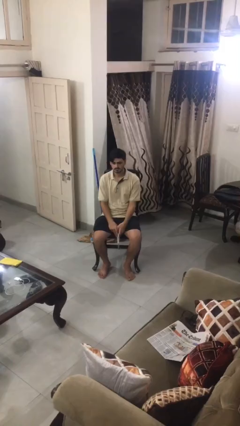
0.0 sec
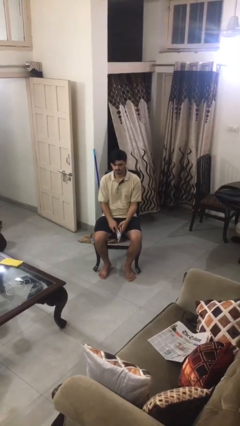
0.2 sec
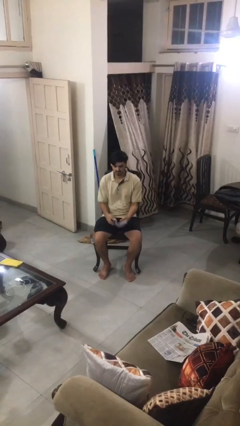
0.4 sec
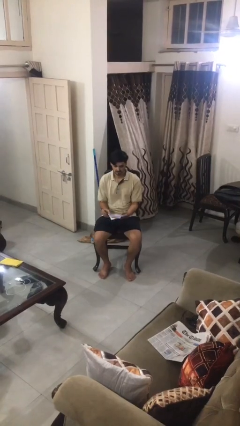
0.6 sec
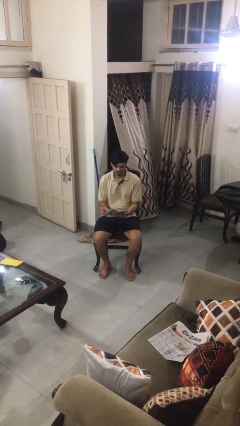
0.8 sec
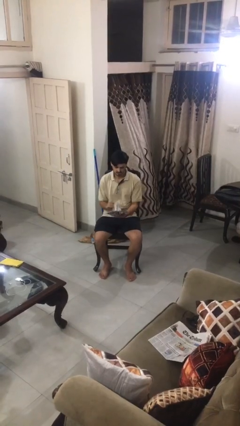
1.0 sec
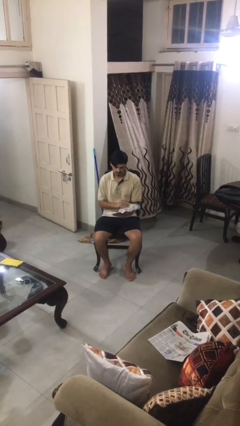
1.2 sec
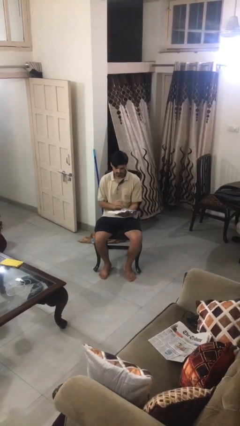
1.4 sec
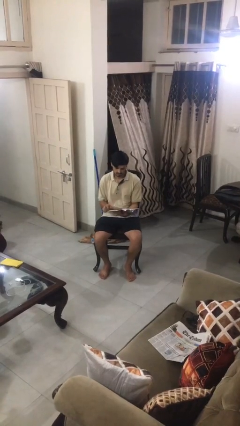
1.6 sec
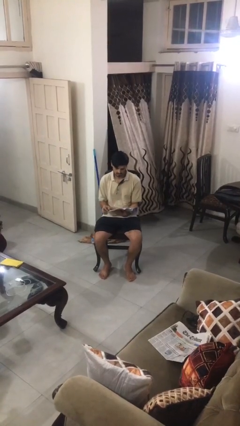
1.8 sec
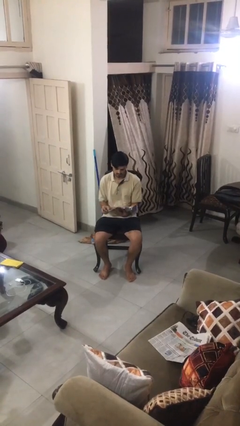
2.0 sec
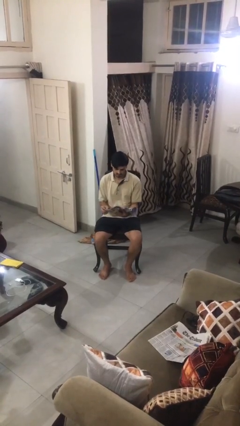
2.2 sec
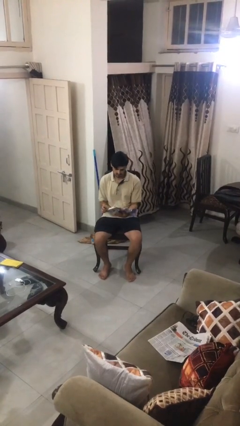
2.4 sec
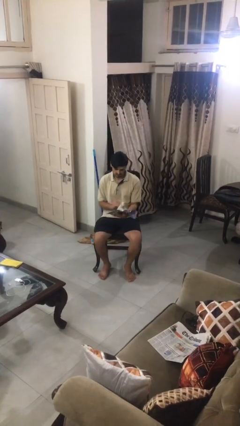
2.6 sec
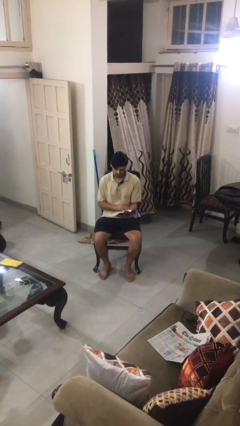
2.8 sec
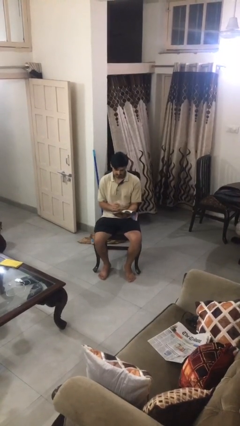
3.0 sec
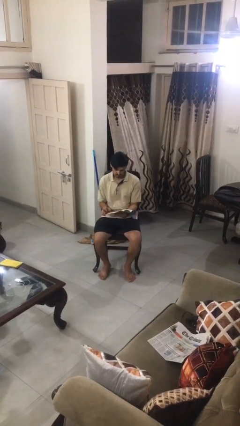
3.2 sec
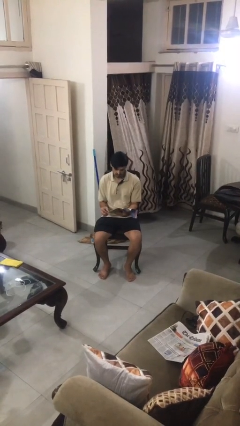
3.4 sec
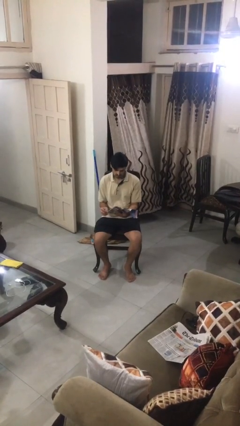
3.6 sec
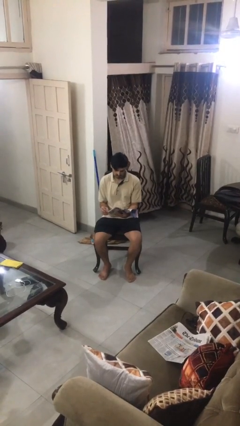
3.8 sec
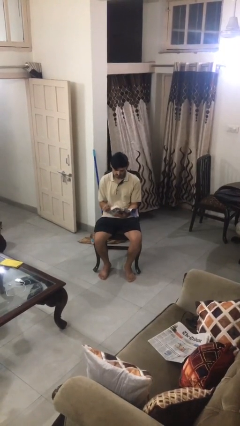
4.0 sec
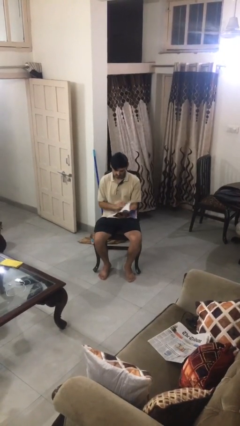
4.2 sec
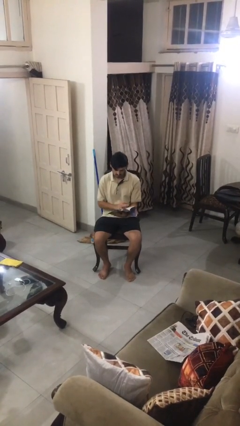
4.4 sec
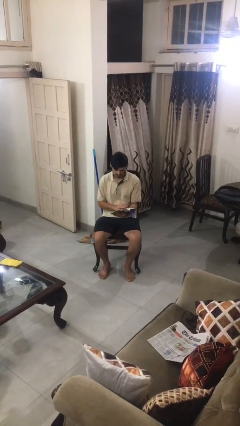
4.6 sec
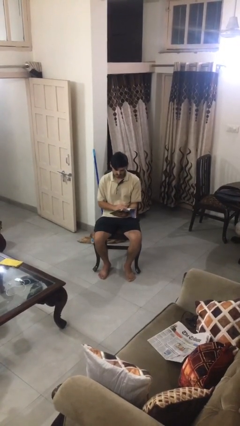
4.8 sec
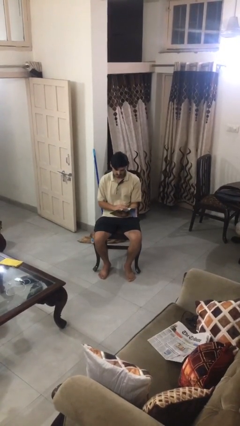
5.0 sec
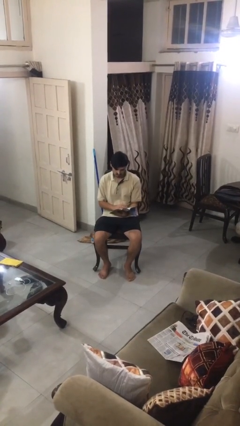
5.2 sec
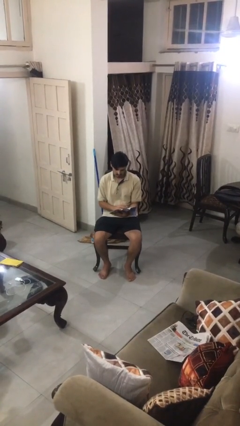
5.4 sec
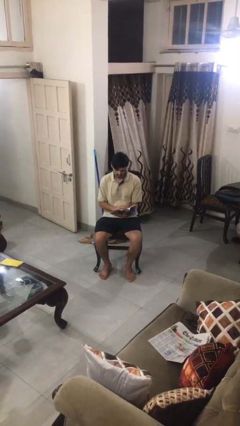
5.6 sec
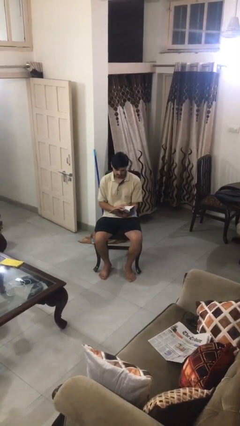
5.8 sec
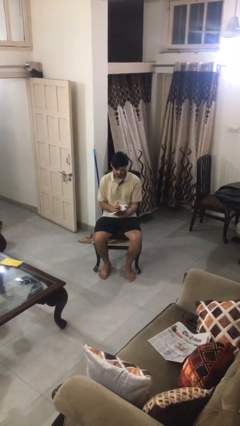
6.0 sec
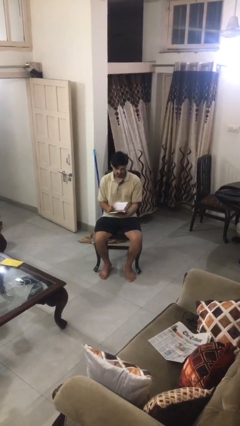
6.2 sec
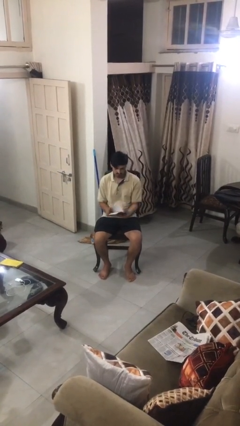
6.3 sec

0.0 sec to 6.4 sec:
person reads magazine

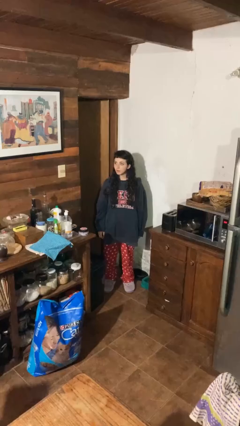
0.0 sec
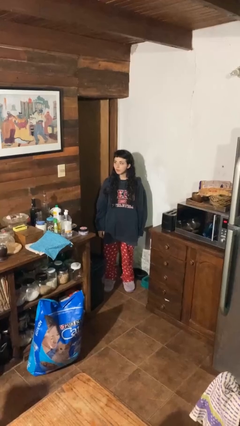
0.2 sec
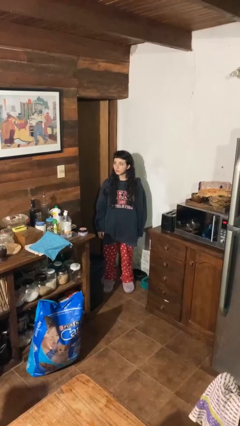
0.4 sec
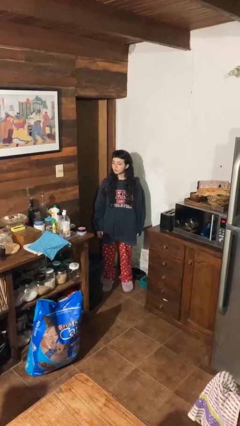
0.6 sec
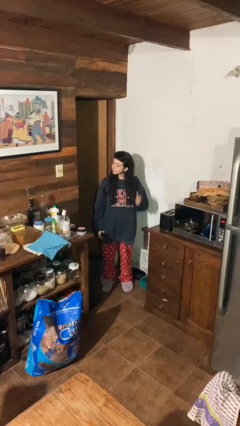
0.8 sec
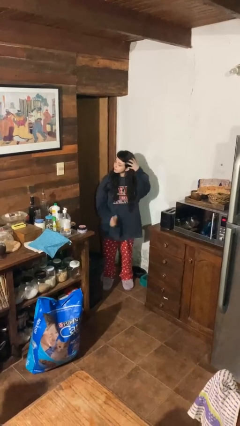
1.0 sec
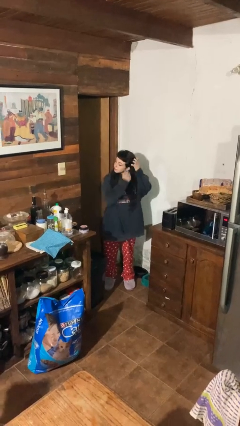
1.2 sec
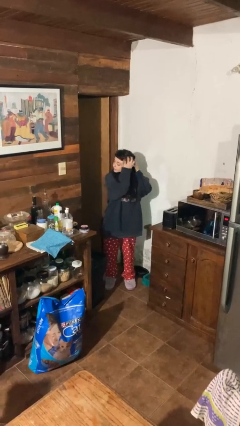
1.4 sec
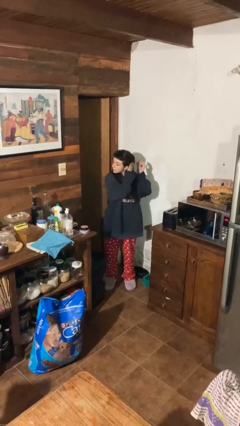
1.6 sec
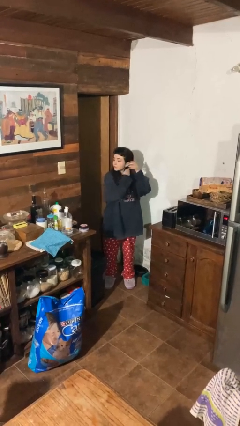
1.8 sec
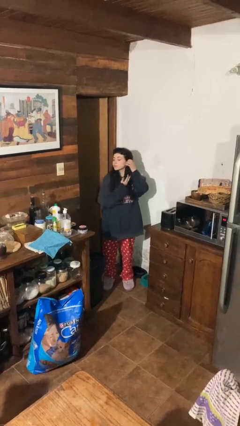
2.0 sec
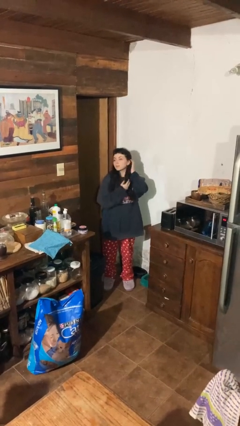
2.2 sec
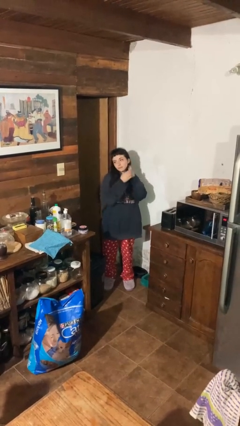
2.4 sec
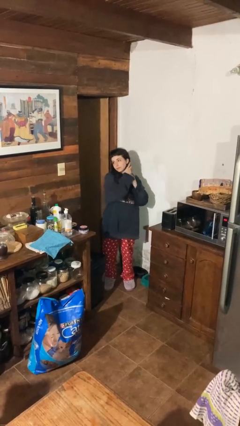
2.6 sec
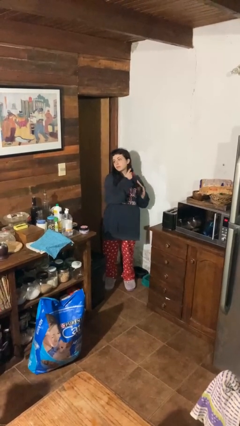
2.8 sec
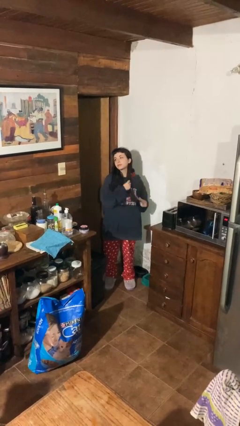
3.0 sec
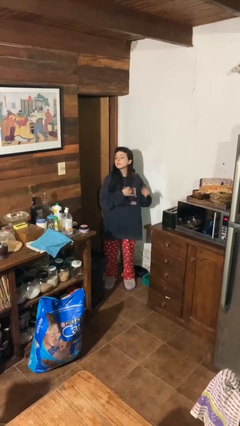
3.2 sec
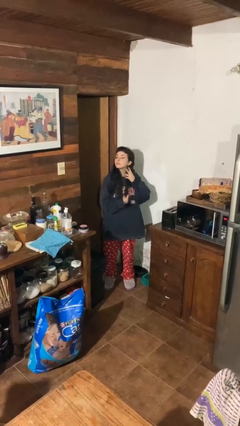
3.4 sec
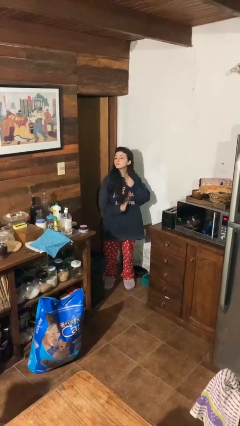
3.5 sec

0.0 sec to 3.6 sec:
person strokes hair

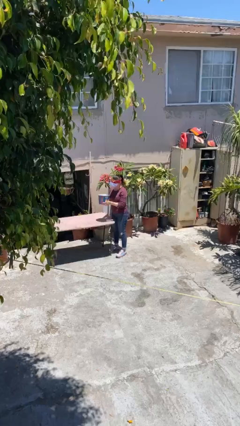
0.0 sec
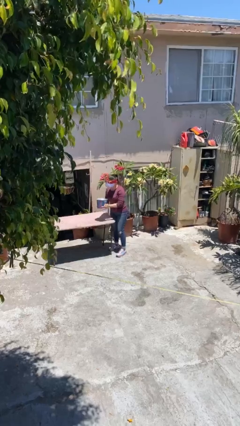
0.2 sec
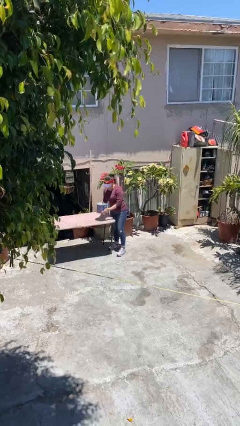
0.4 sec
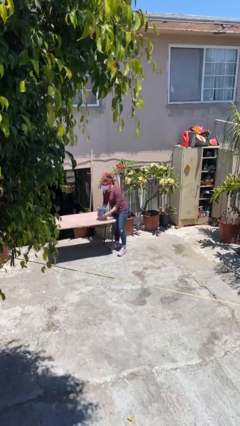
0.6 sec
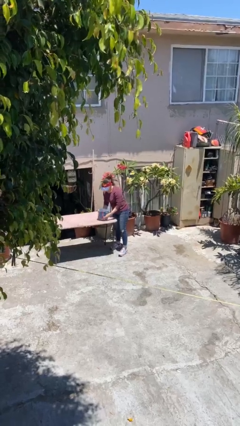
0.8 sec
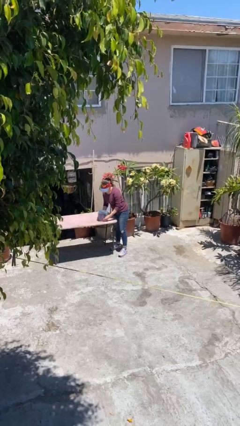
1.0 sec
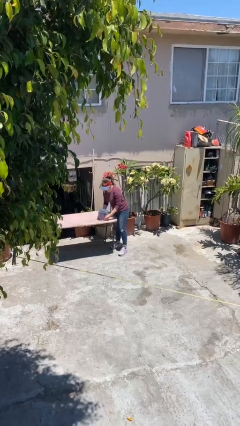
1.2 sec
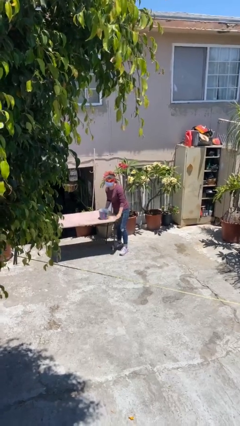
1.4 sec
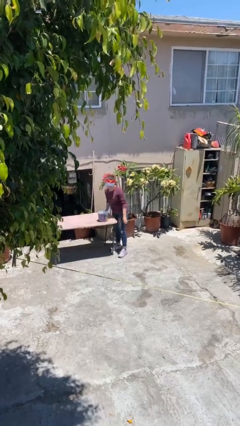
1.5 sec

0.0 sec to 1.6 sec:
person puts down object on table

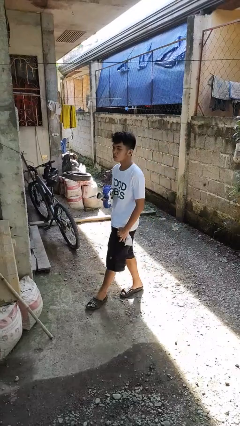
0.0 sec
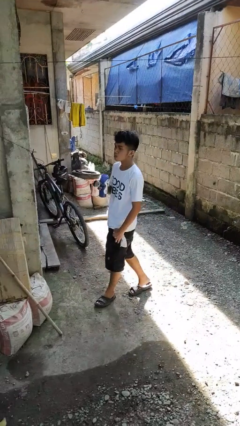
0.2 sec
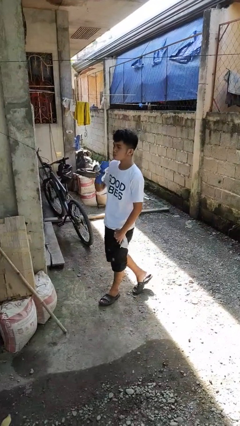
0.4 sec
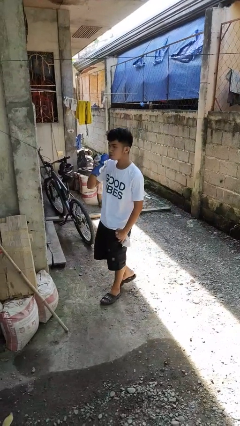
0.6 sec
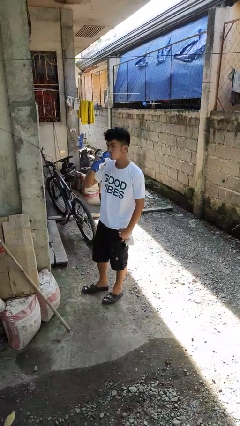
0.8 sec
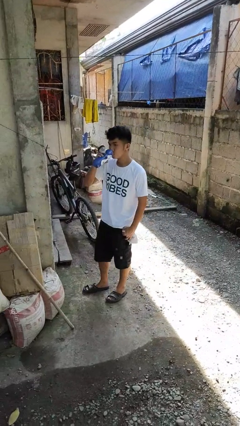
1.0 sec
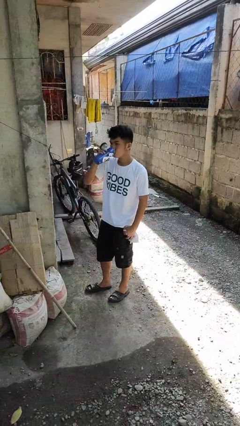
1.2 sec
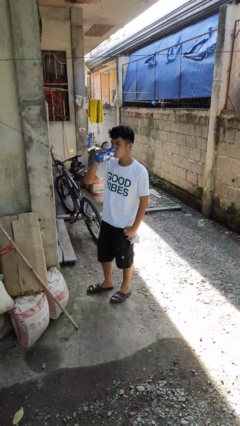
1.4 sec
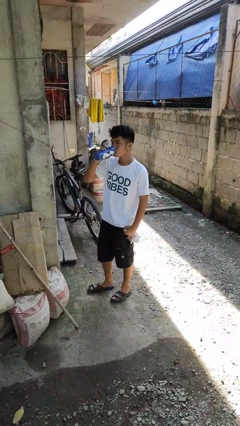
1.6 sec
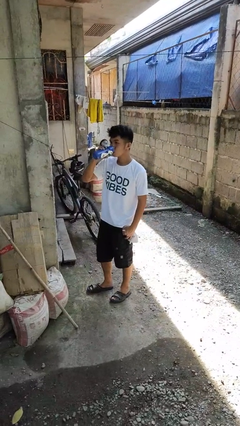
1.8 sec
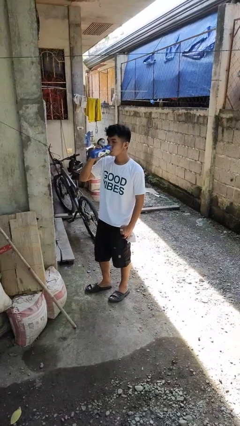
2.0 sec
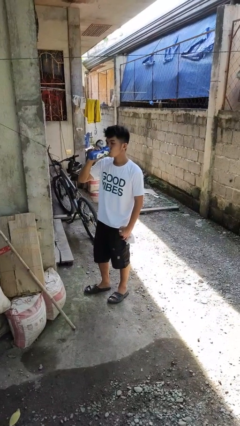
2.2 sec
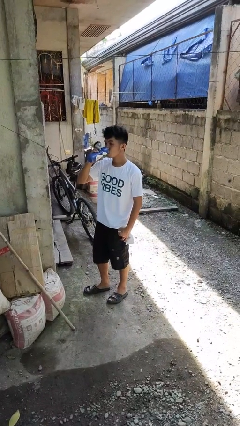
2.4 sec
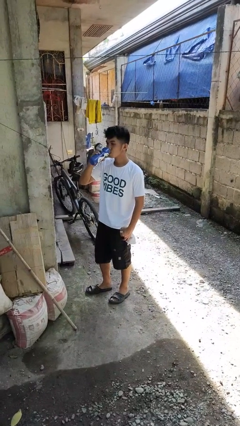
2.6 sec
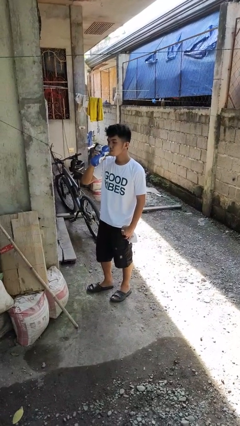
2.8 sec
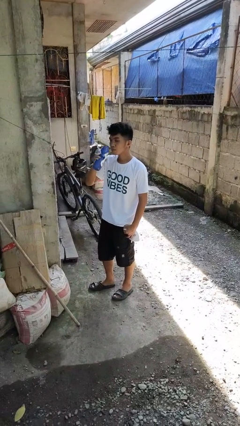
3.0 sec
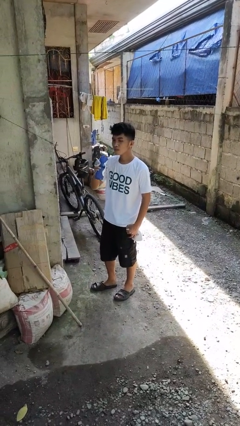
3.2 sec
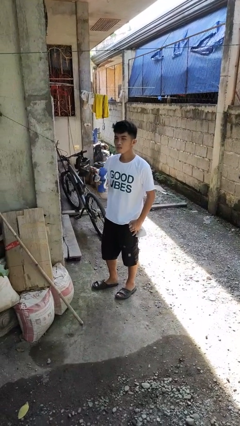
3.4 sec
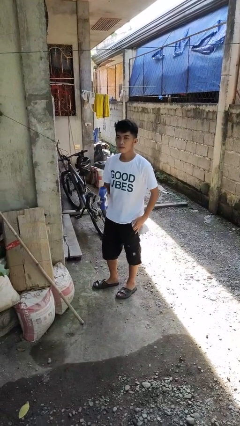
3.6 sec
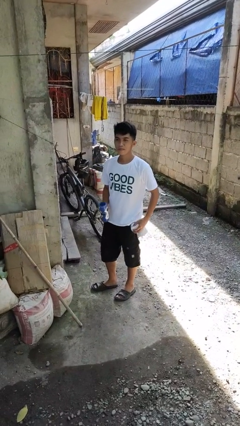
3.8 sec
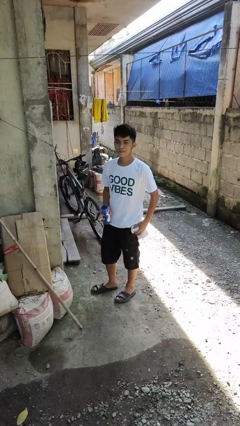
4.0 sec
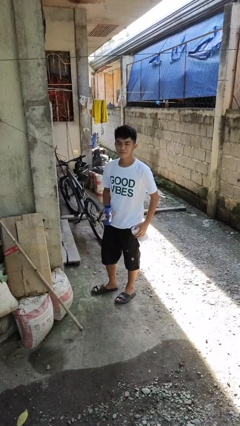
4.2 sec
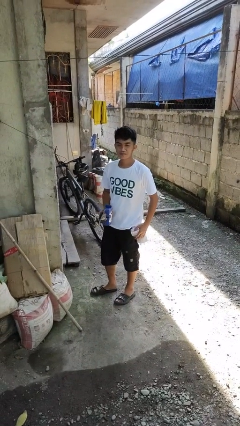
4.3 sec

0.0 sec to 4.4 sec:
person drinks from bottle

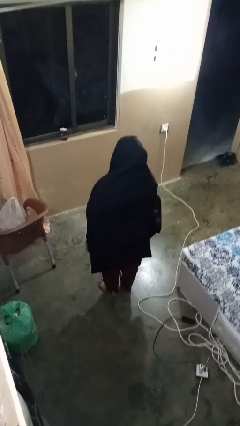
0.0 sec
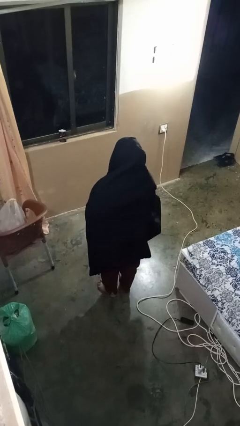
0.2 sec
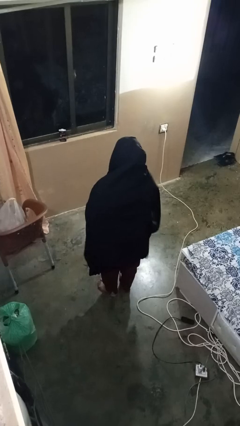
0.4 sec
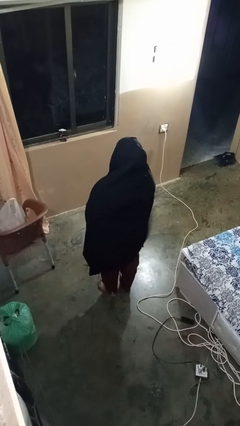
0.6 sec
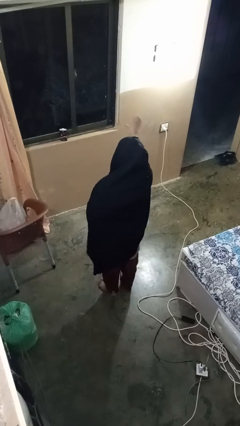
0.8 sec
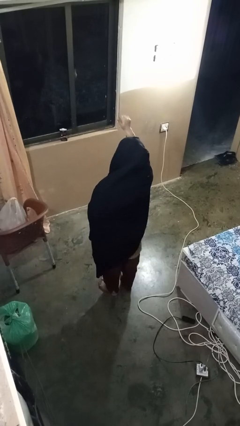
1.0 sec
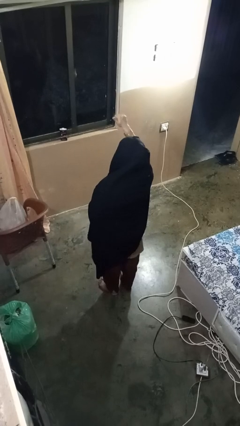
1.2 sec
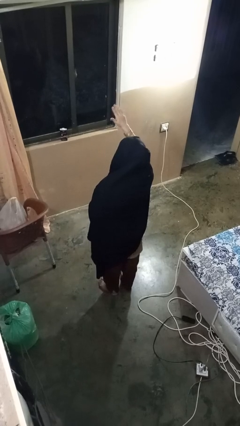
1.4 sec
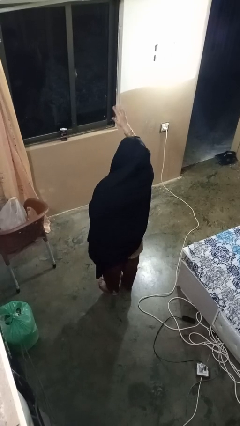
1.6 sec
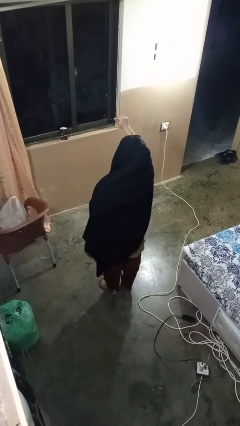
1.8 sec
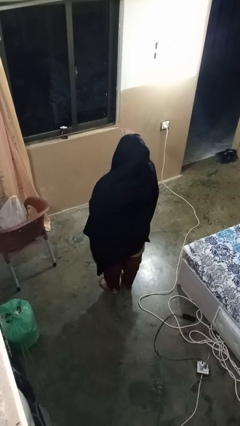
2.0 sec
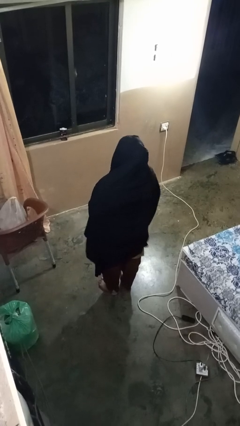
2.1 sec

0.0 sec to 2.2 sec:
person gestures come here
